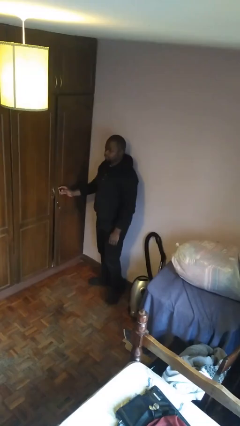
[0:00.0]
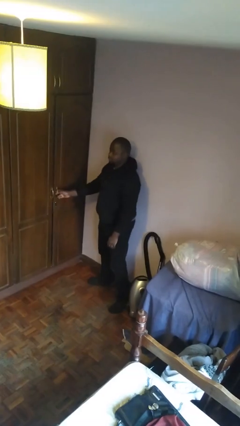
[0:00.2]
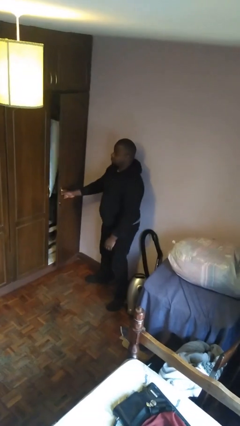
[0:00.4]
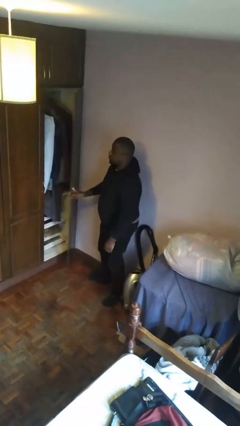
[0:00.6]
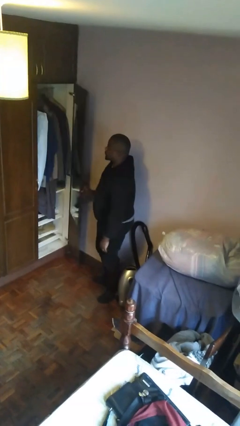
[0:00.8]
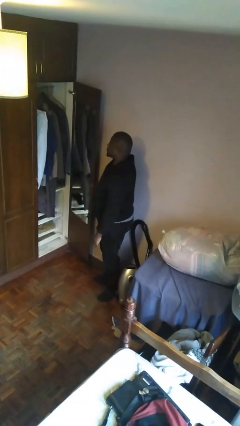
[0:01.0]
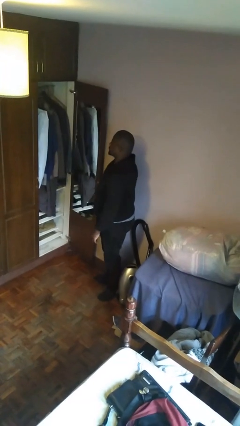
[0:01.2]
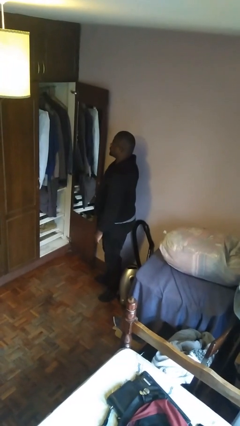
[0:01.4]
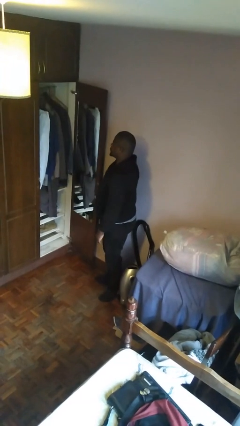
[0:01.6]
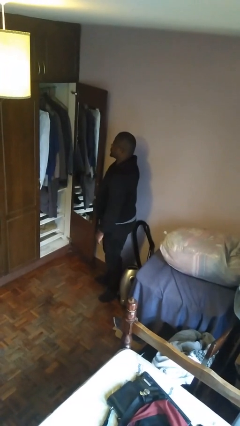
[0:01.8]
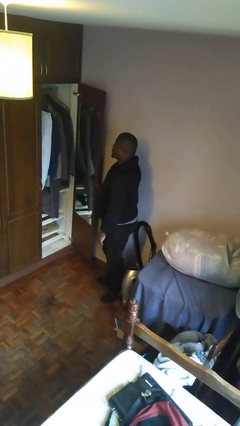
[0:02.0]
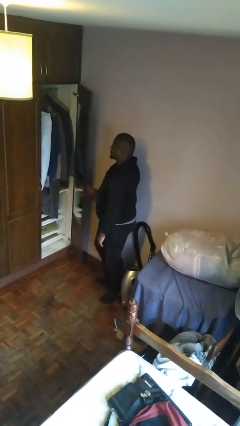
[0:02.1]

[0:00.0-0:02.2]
person opens closet door

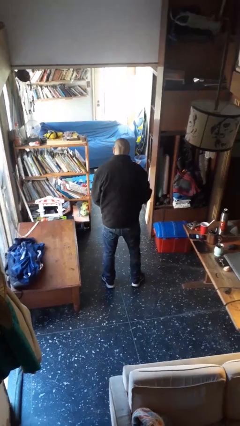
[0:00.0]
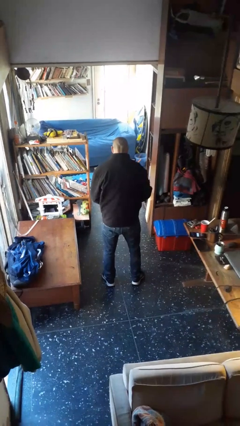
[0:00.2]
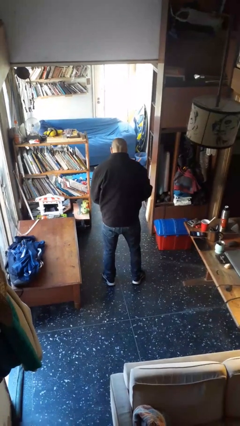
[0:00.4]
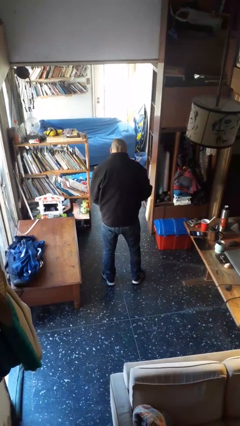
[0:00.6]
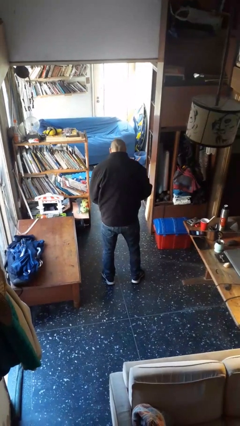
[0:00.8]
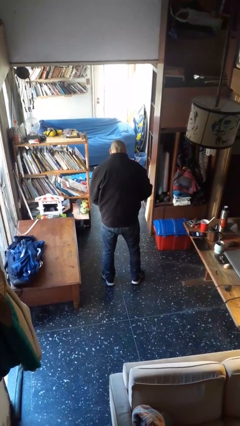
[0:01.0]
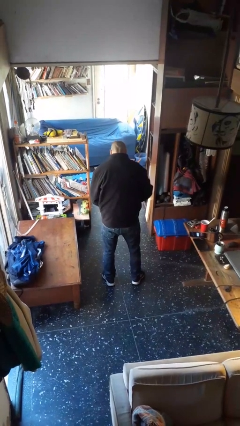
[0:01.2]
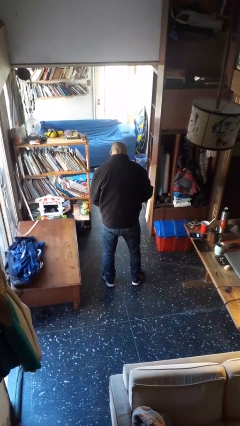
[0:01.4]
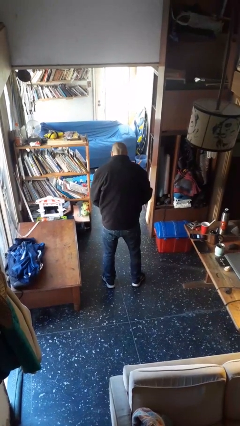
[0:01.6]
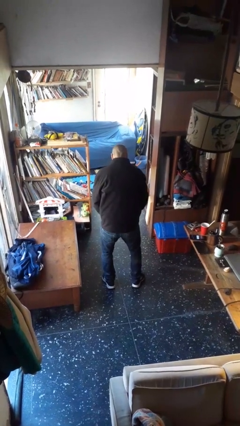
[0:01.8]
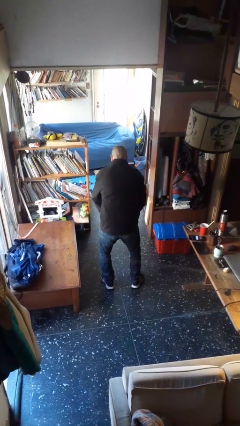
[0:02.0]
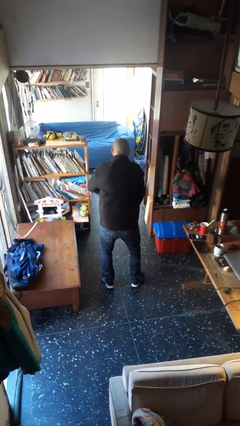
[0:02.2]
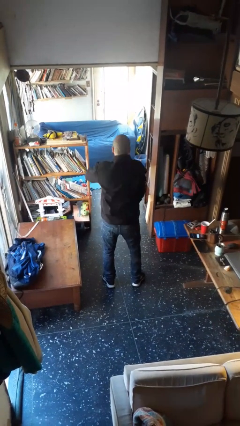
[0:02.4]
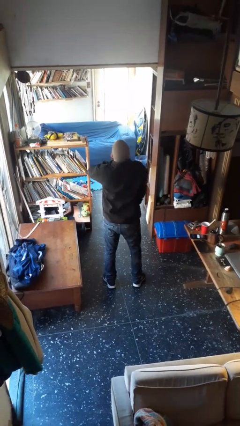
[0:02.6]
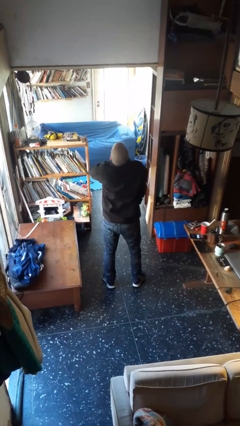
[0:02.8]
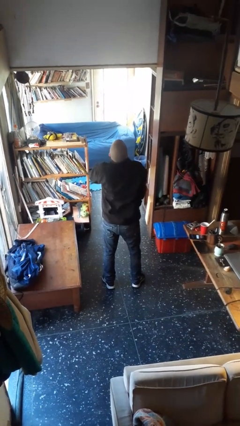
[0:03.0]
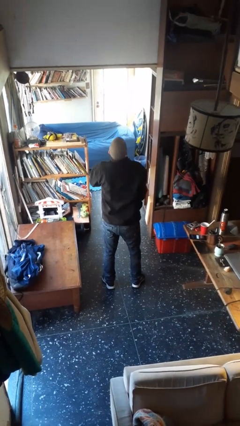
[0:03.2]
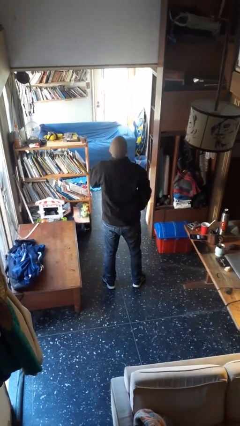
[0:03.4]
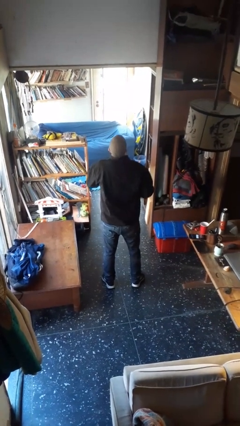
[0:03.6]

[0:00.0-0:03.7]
person zips up jacket

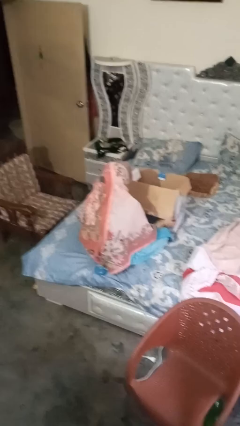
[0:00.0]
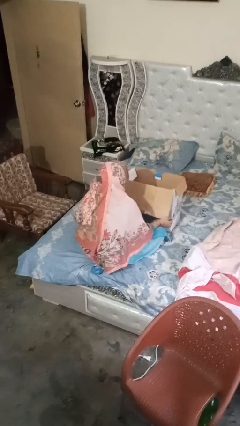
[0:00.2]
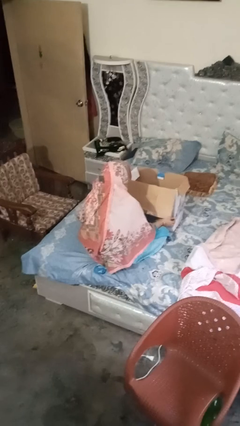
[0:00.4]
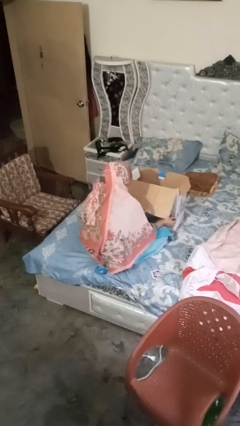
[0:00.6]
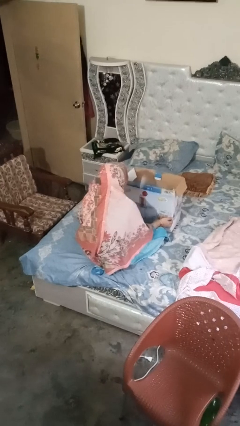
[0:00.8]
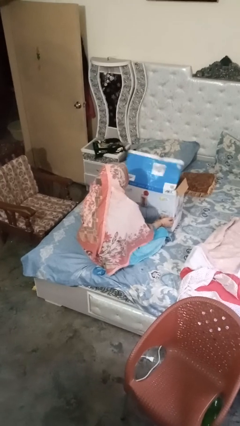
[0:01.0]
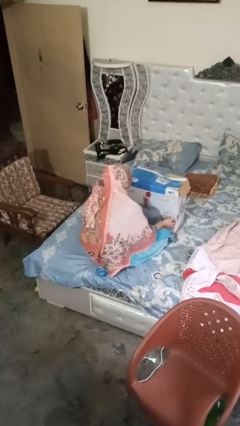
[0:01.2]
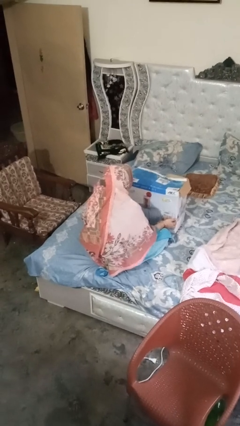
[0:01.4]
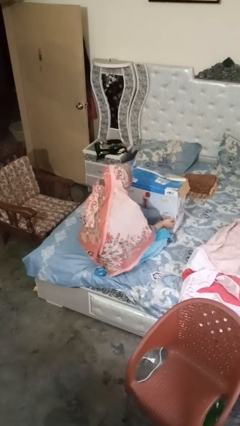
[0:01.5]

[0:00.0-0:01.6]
person closes box

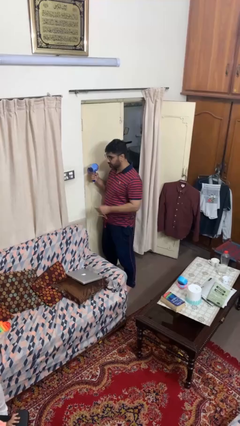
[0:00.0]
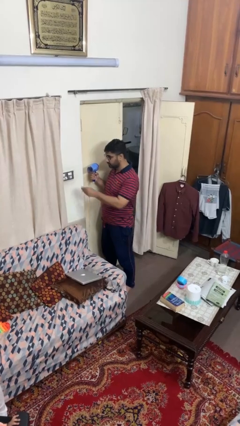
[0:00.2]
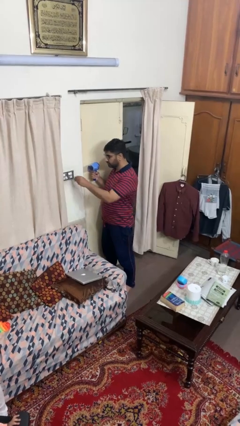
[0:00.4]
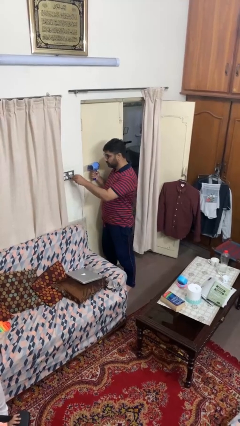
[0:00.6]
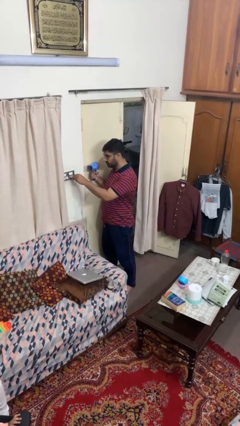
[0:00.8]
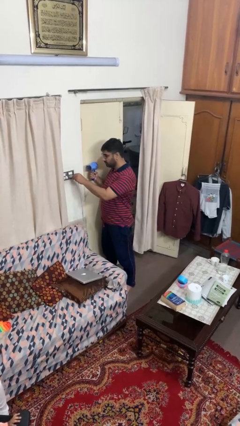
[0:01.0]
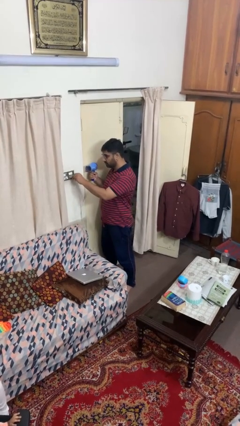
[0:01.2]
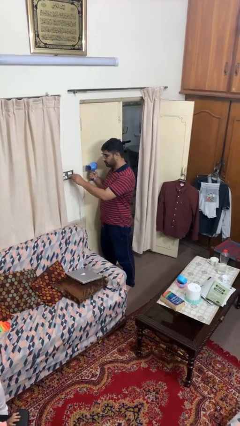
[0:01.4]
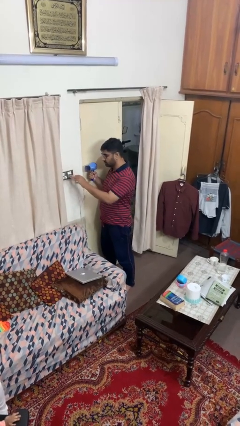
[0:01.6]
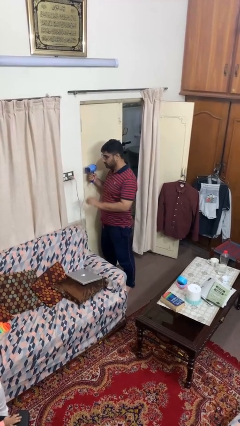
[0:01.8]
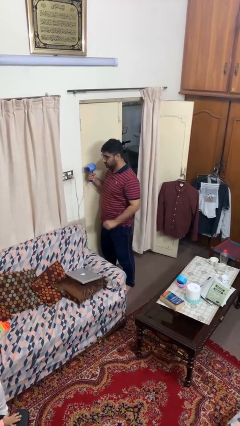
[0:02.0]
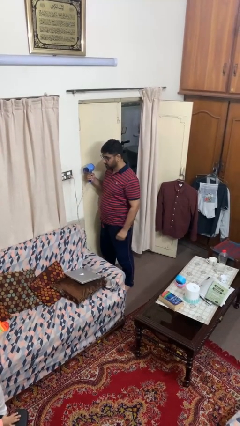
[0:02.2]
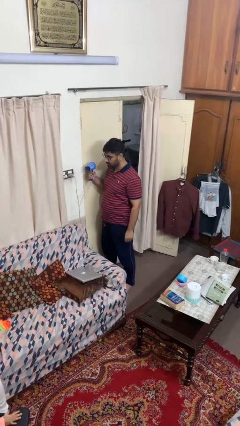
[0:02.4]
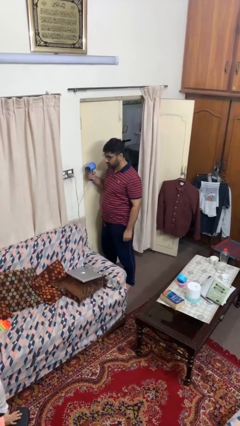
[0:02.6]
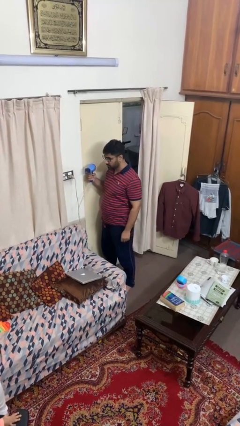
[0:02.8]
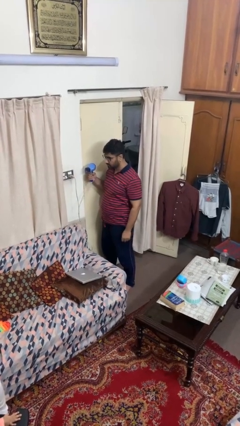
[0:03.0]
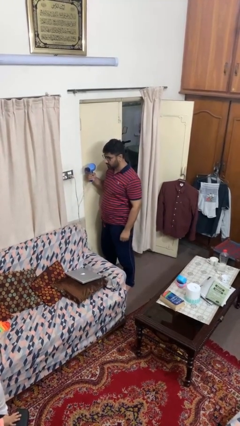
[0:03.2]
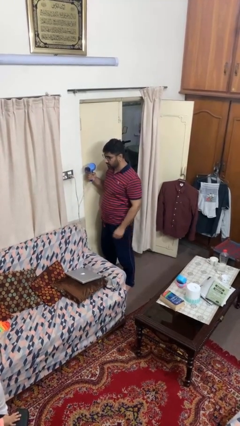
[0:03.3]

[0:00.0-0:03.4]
person plugs into electrical socket

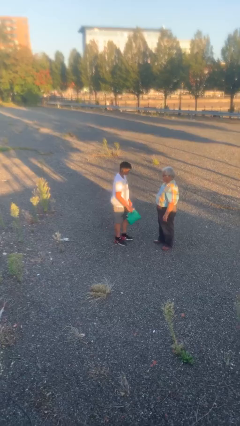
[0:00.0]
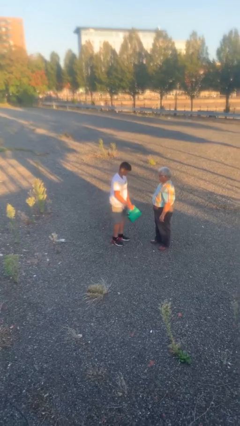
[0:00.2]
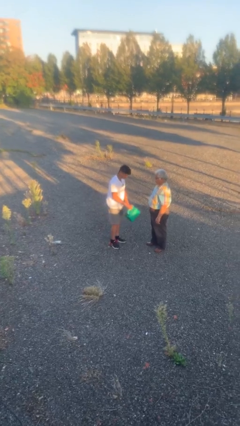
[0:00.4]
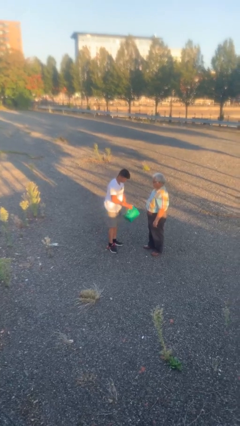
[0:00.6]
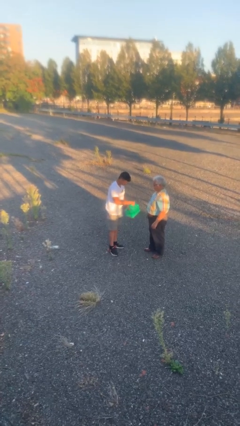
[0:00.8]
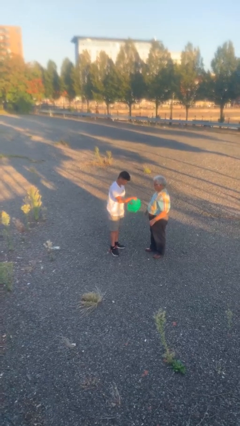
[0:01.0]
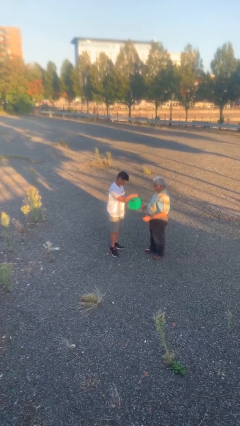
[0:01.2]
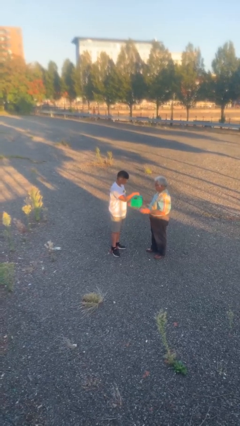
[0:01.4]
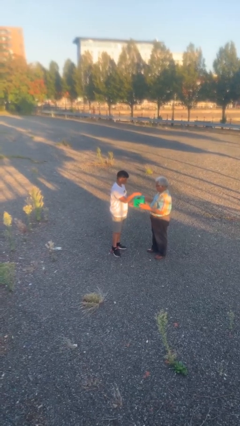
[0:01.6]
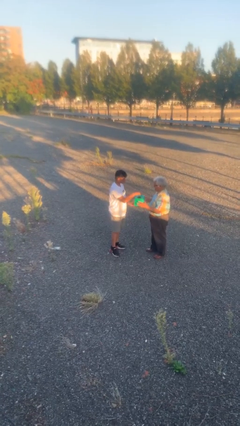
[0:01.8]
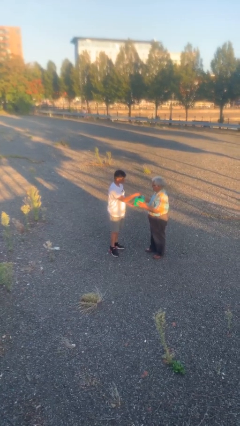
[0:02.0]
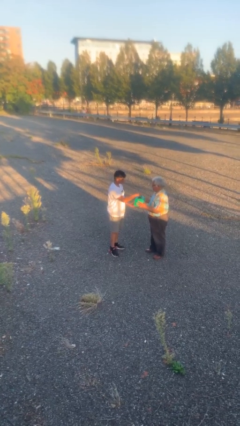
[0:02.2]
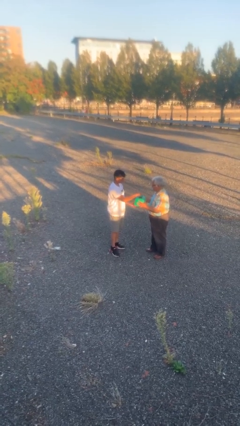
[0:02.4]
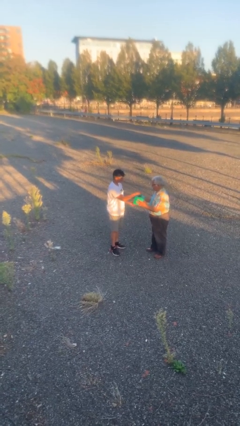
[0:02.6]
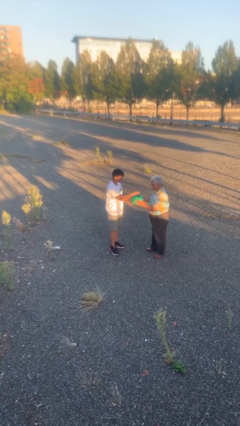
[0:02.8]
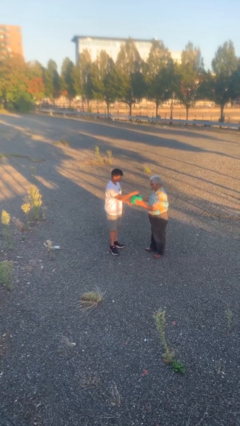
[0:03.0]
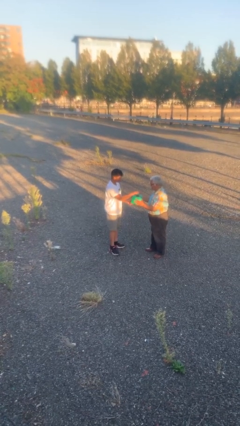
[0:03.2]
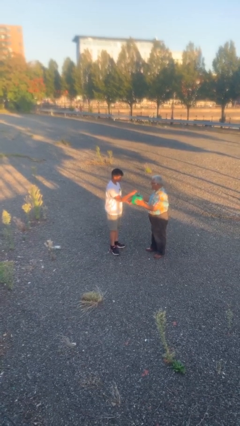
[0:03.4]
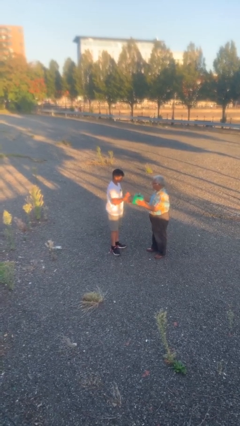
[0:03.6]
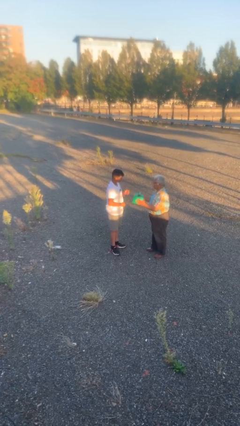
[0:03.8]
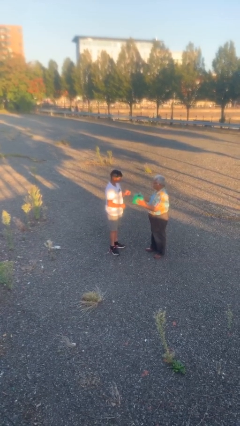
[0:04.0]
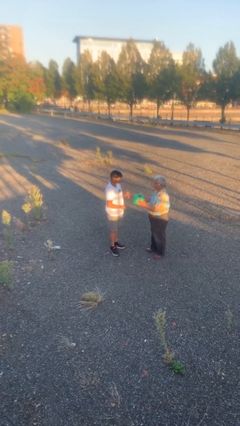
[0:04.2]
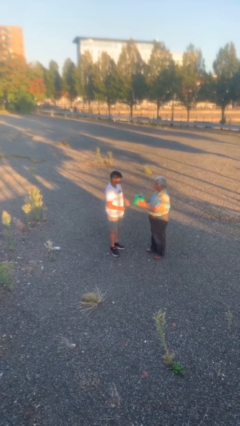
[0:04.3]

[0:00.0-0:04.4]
person transfers object to person

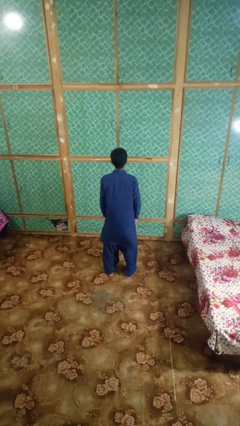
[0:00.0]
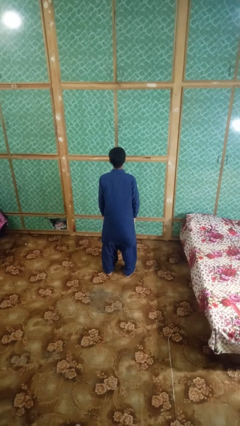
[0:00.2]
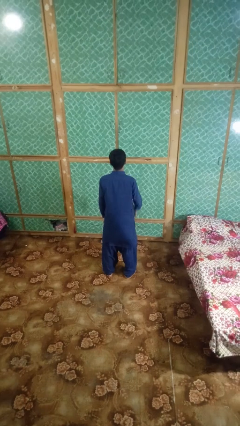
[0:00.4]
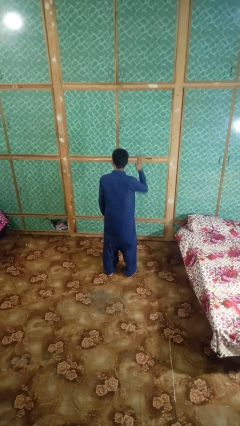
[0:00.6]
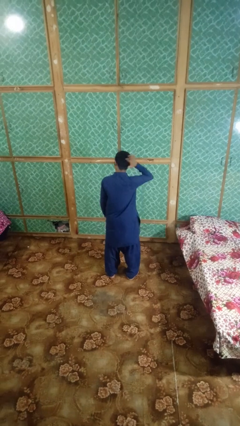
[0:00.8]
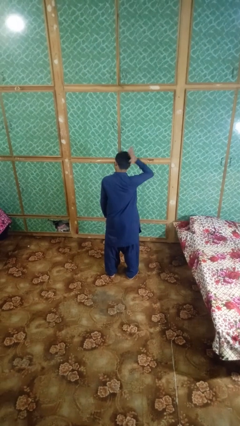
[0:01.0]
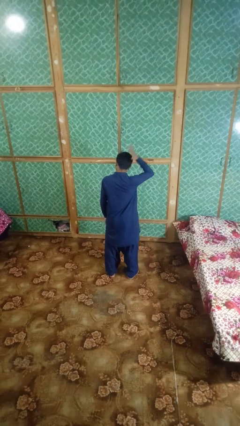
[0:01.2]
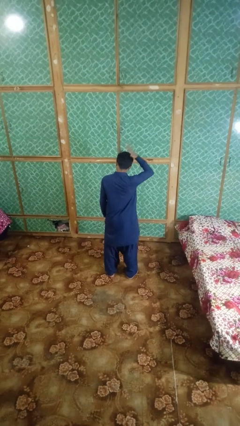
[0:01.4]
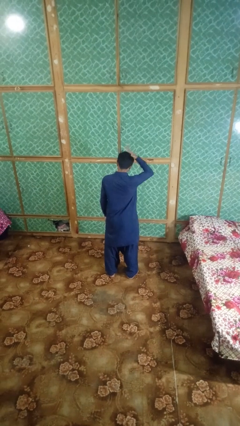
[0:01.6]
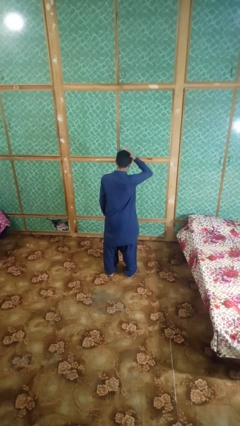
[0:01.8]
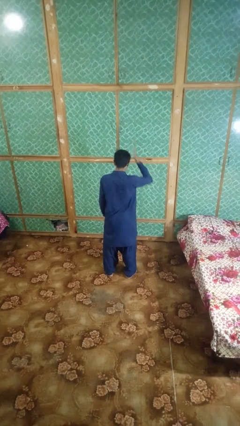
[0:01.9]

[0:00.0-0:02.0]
person pats head
